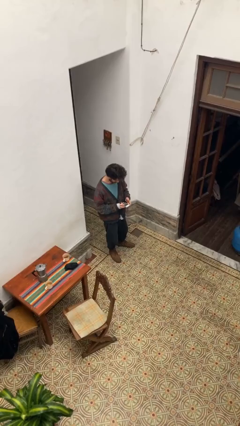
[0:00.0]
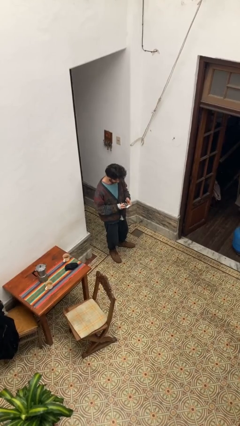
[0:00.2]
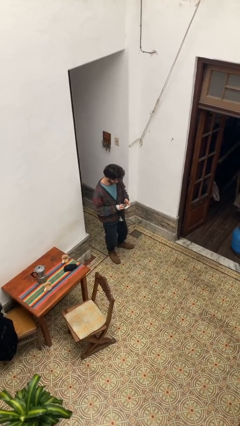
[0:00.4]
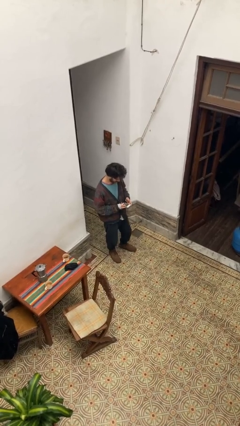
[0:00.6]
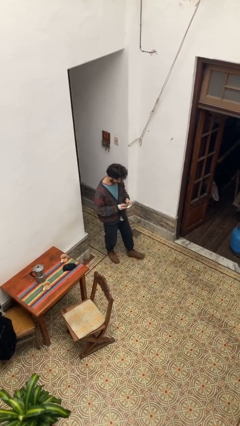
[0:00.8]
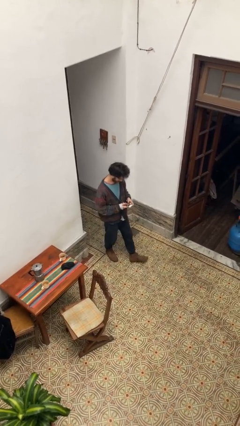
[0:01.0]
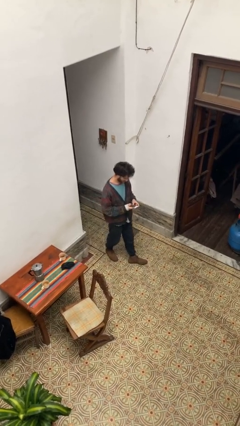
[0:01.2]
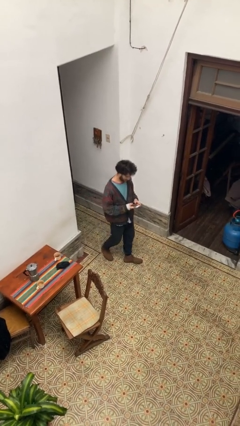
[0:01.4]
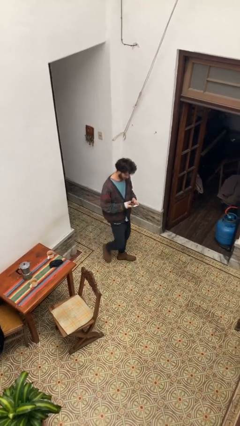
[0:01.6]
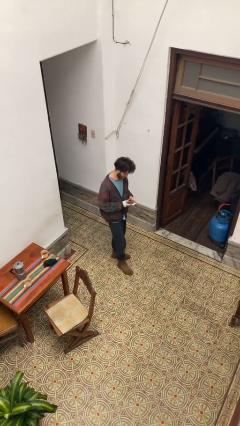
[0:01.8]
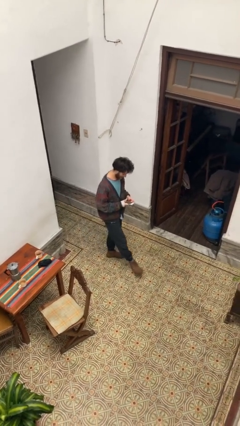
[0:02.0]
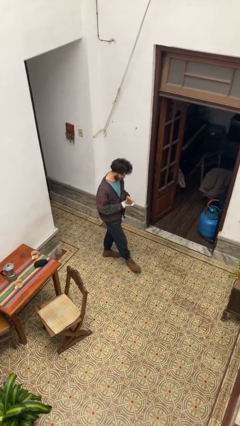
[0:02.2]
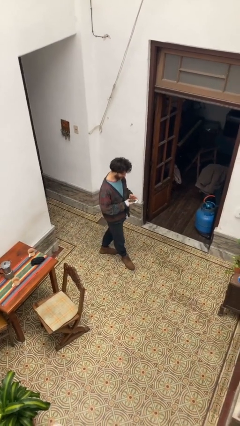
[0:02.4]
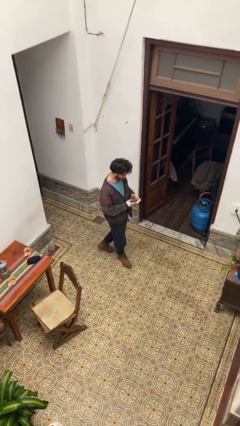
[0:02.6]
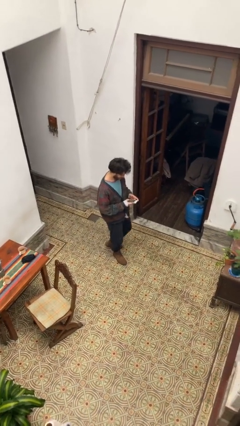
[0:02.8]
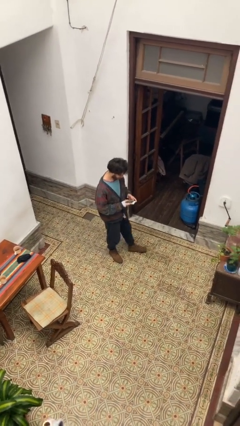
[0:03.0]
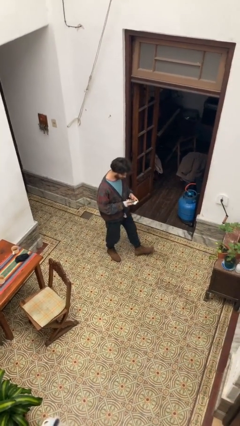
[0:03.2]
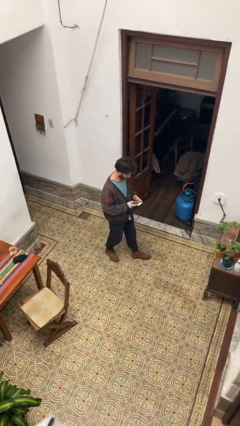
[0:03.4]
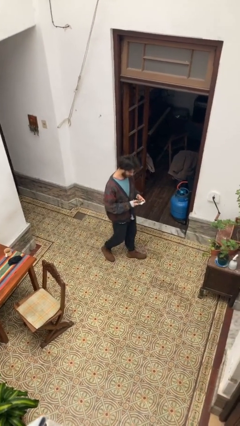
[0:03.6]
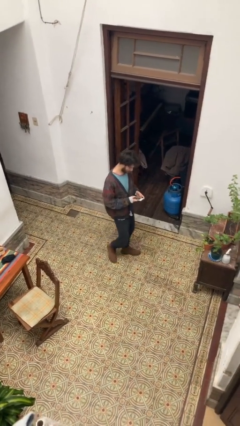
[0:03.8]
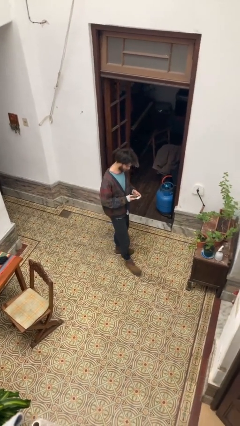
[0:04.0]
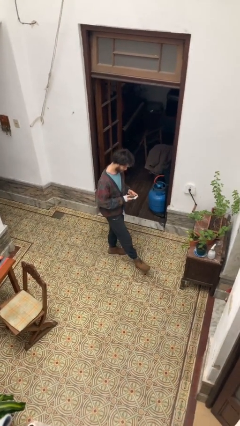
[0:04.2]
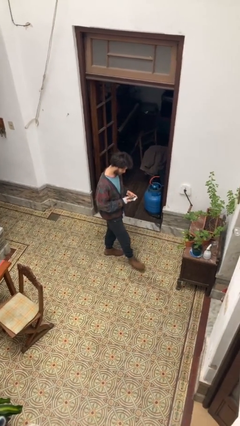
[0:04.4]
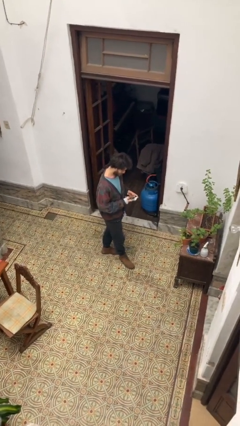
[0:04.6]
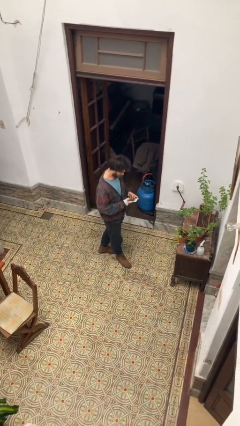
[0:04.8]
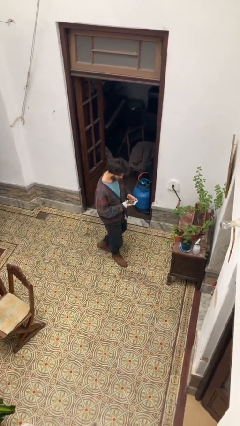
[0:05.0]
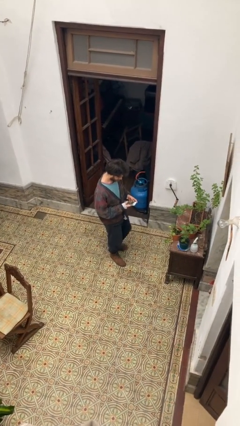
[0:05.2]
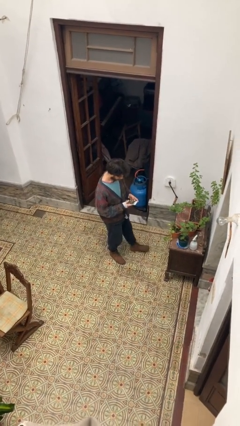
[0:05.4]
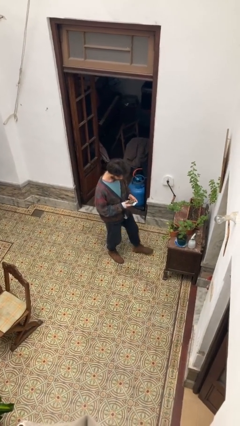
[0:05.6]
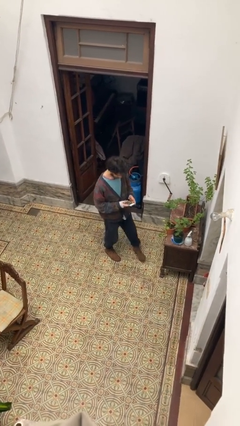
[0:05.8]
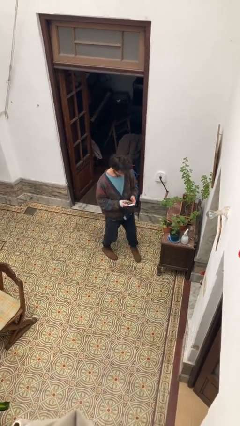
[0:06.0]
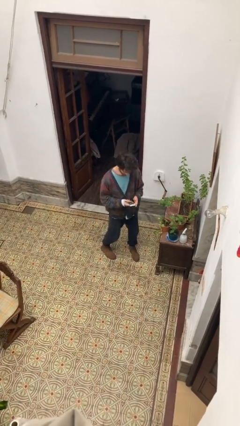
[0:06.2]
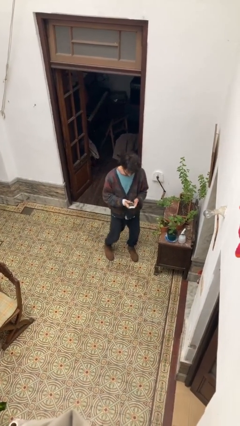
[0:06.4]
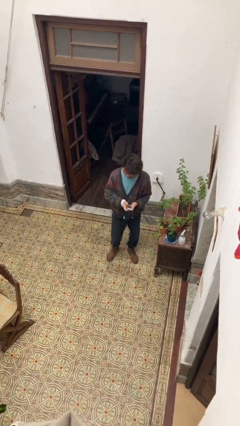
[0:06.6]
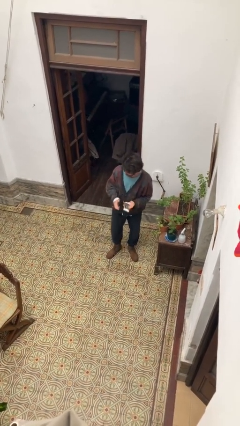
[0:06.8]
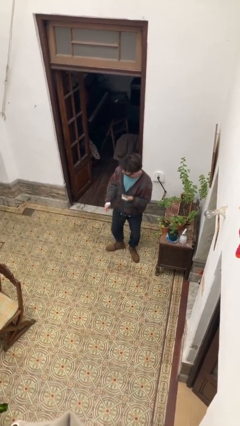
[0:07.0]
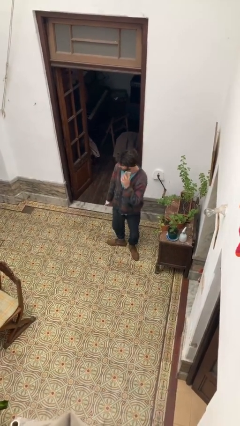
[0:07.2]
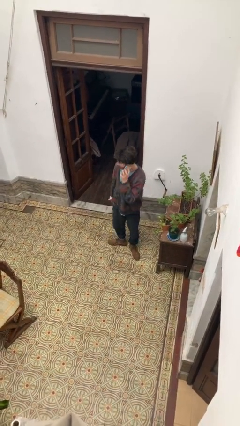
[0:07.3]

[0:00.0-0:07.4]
person texts on phone

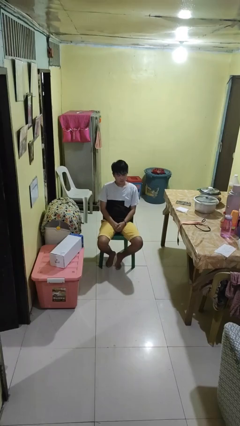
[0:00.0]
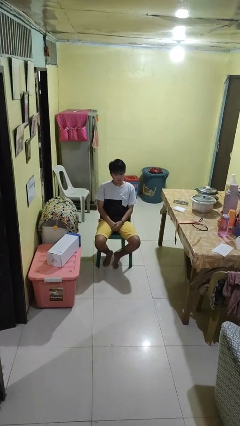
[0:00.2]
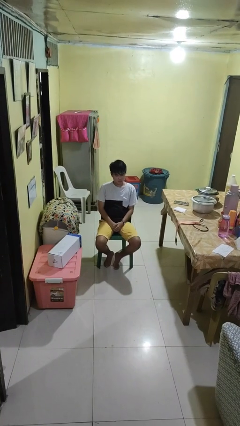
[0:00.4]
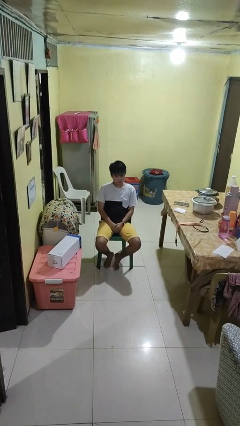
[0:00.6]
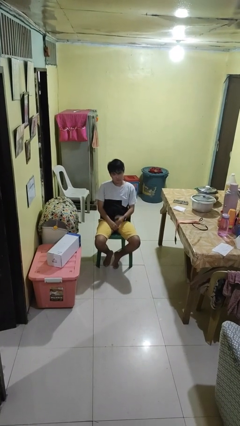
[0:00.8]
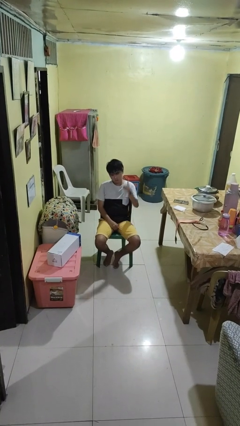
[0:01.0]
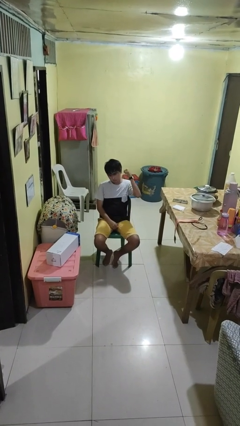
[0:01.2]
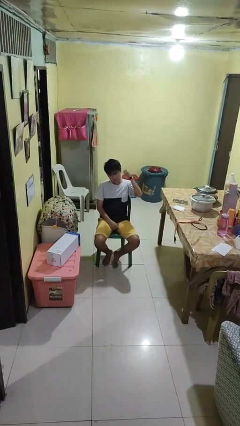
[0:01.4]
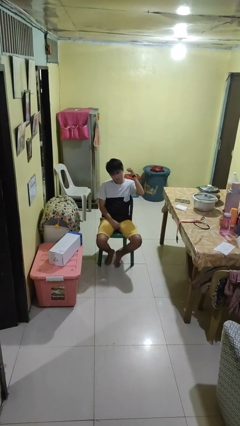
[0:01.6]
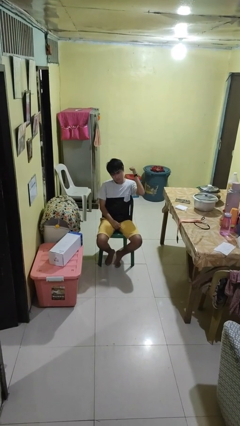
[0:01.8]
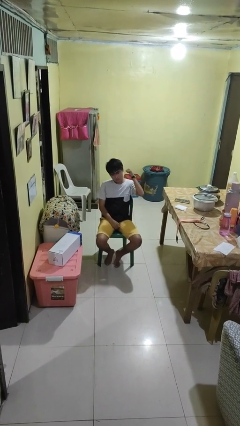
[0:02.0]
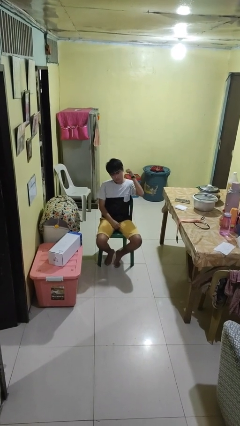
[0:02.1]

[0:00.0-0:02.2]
person gestures behind me

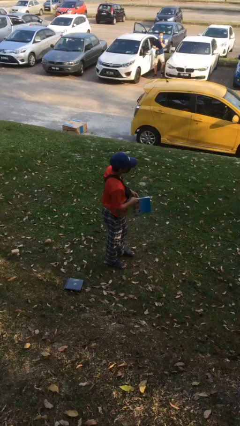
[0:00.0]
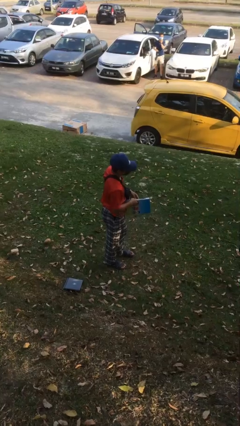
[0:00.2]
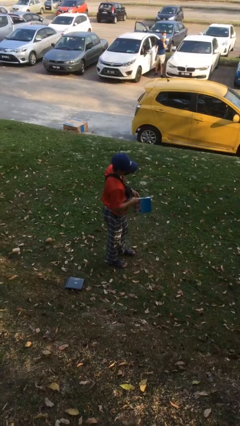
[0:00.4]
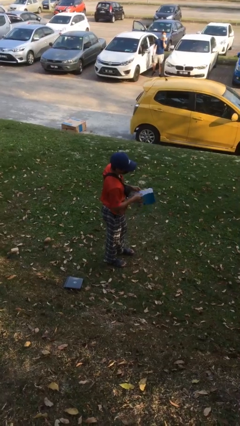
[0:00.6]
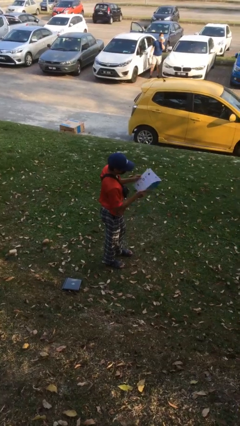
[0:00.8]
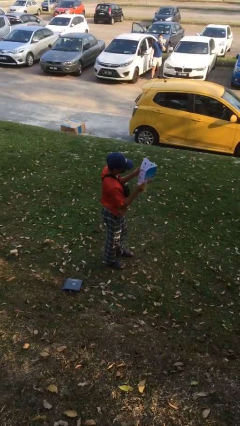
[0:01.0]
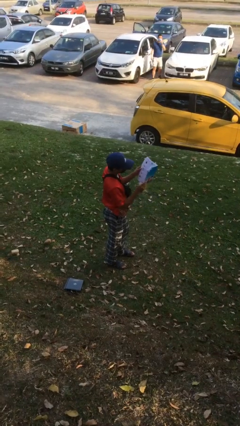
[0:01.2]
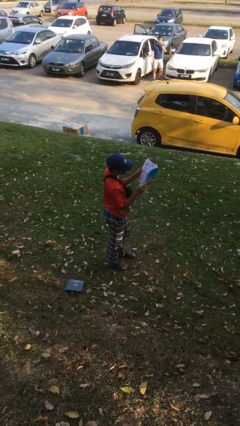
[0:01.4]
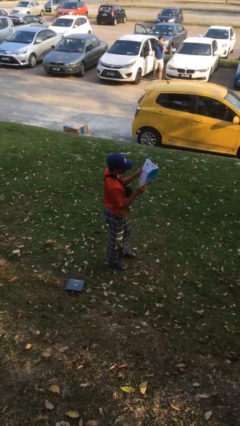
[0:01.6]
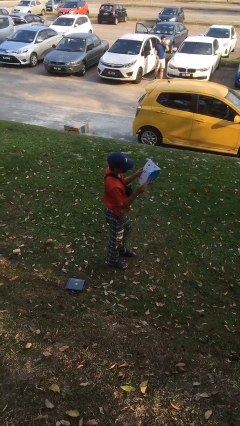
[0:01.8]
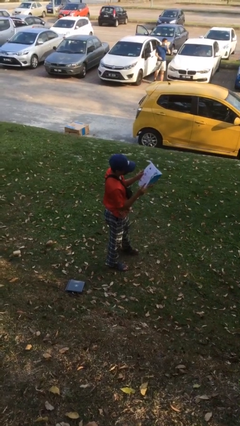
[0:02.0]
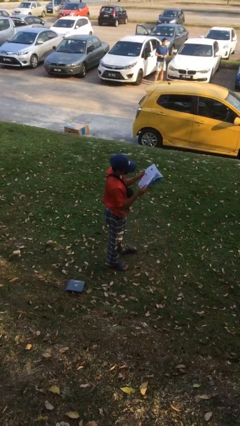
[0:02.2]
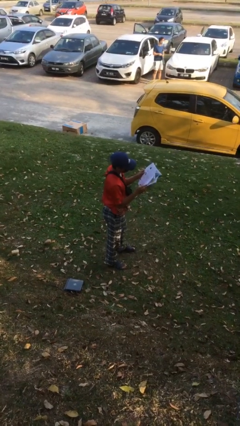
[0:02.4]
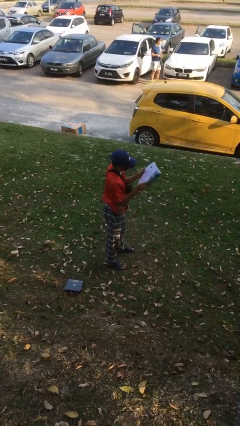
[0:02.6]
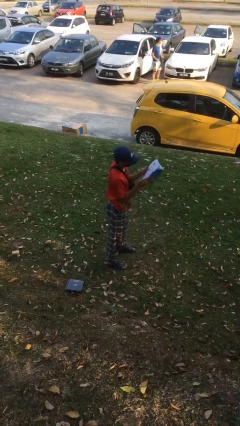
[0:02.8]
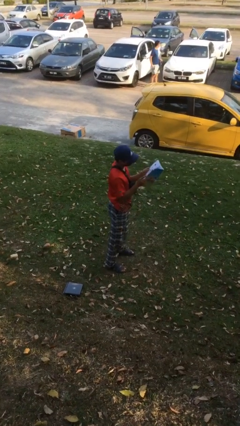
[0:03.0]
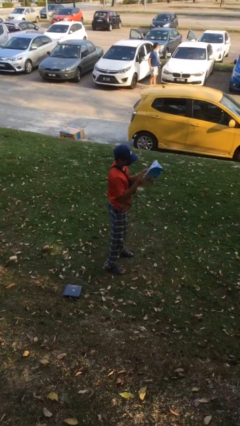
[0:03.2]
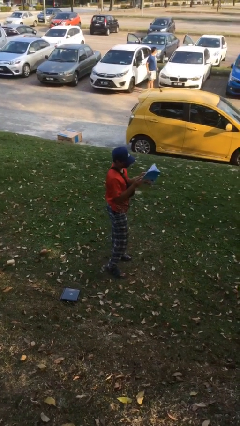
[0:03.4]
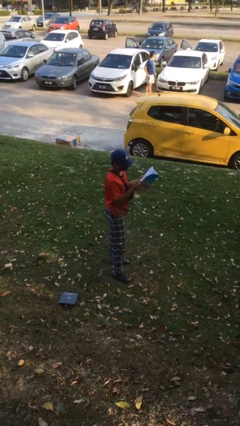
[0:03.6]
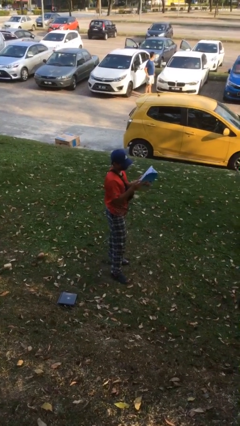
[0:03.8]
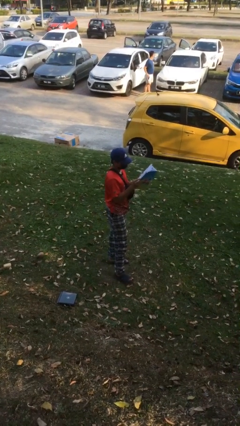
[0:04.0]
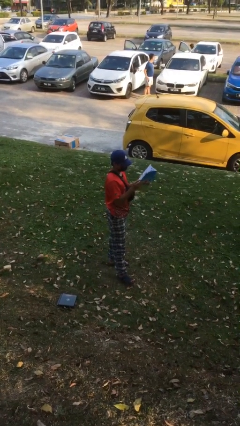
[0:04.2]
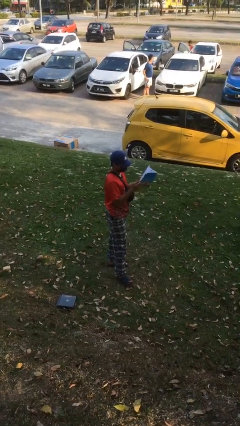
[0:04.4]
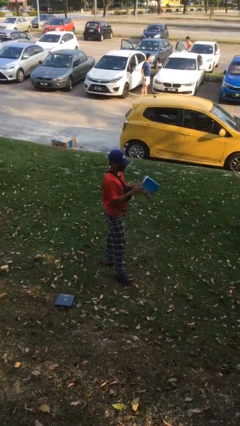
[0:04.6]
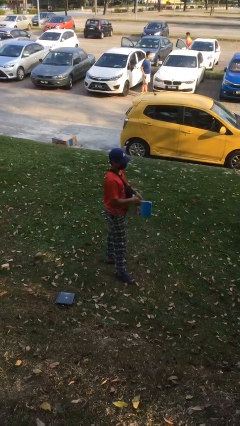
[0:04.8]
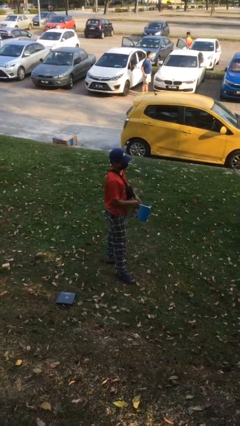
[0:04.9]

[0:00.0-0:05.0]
person reads document

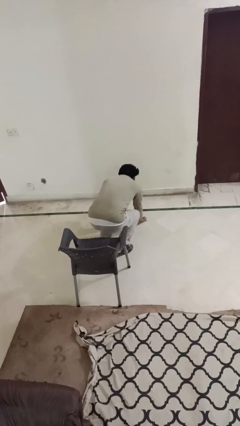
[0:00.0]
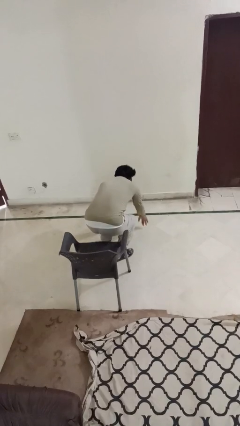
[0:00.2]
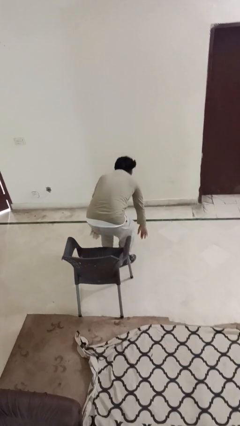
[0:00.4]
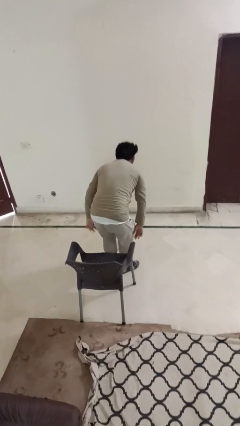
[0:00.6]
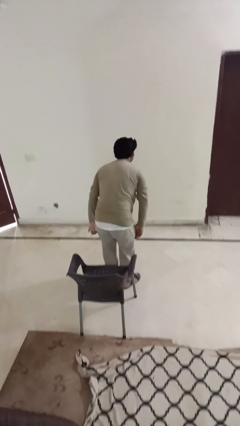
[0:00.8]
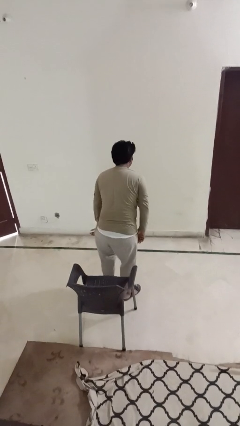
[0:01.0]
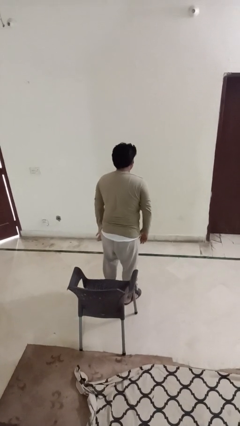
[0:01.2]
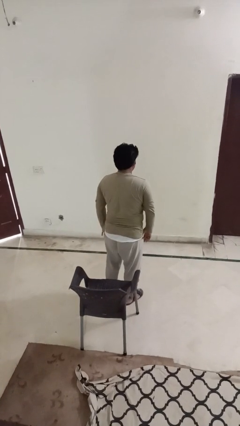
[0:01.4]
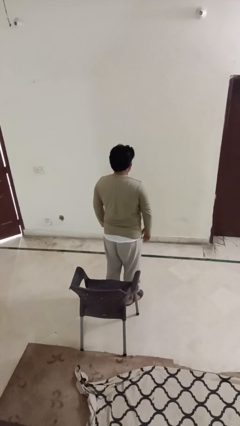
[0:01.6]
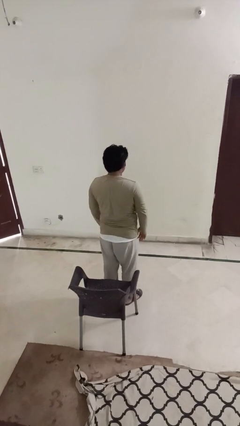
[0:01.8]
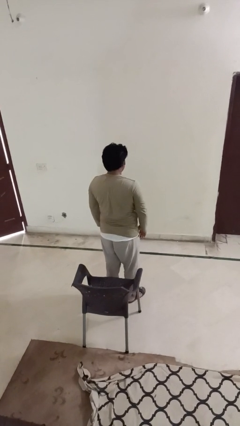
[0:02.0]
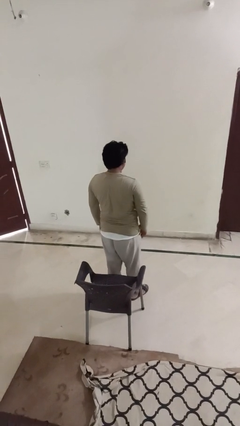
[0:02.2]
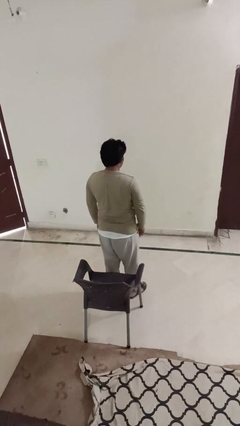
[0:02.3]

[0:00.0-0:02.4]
person stands up from floor

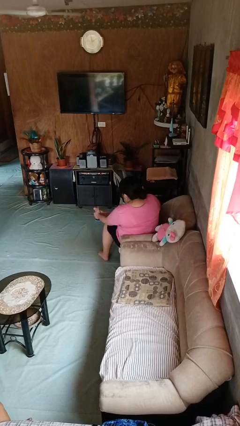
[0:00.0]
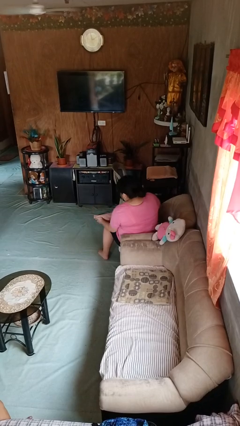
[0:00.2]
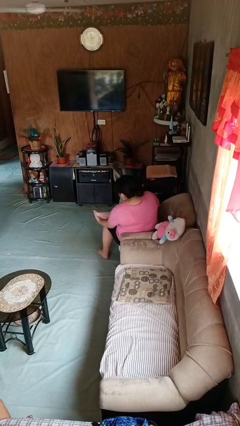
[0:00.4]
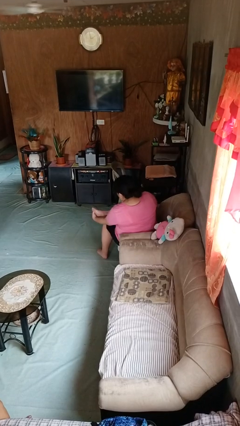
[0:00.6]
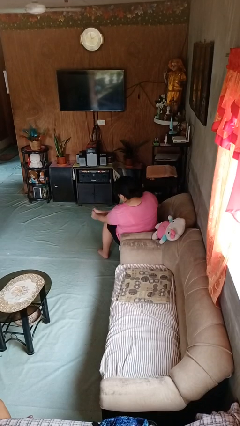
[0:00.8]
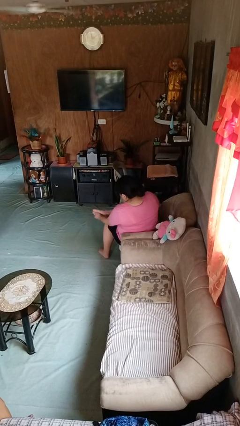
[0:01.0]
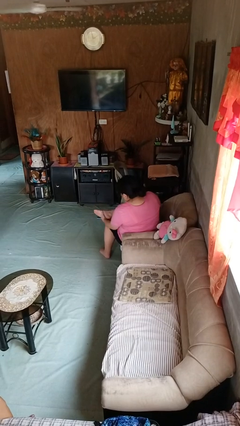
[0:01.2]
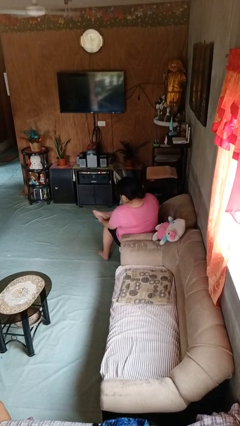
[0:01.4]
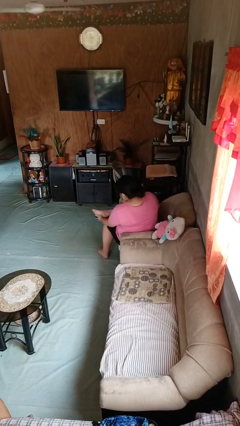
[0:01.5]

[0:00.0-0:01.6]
person rubs foot
